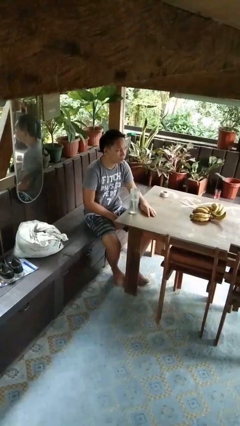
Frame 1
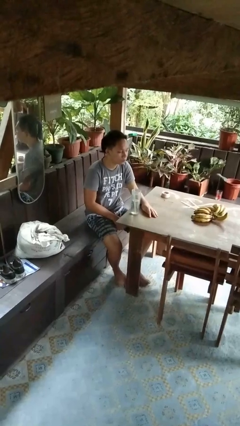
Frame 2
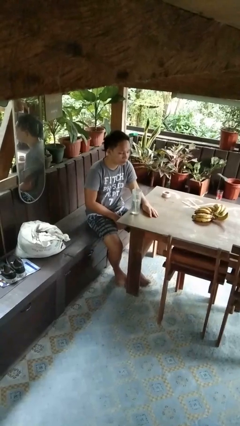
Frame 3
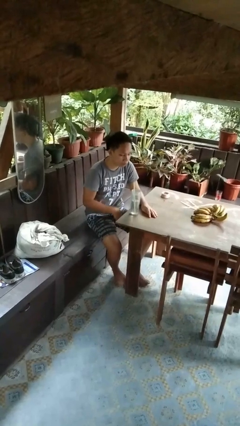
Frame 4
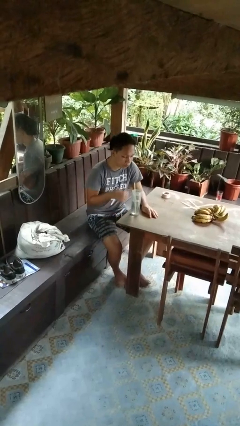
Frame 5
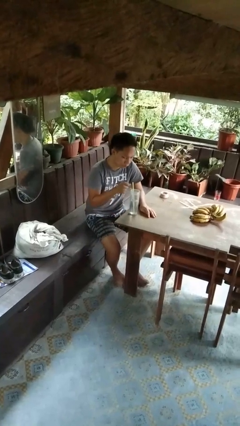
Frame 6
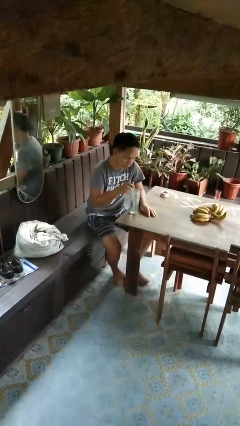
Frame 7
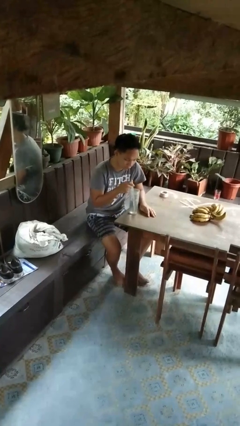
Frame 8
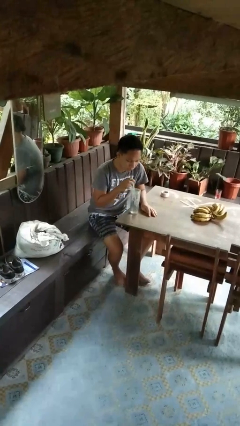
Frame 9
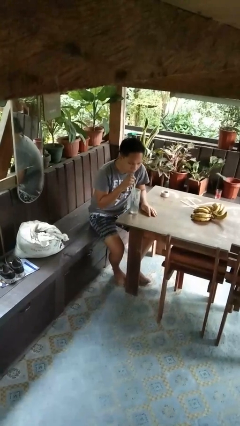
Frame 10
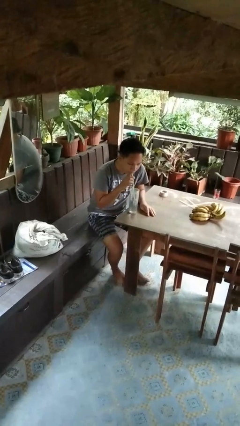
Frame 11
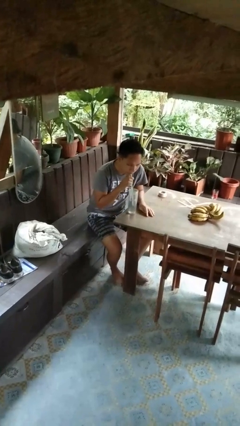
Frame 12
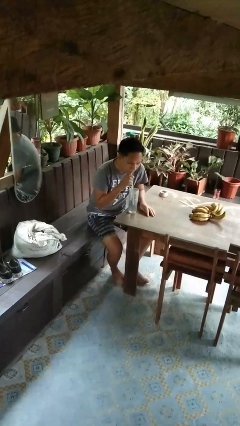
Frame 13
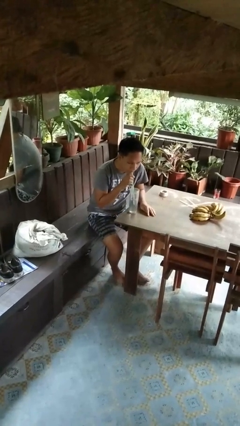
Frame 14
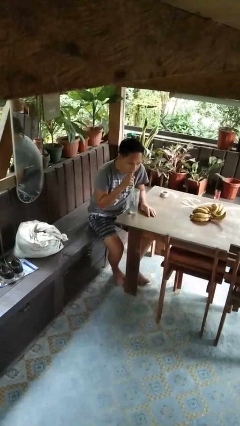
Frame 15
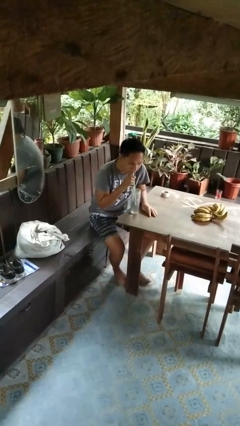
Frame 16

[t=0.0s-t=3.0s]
person drinks from straw

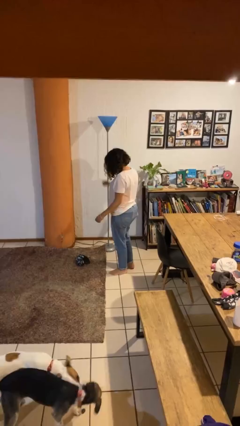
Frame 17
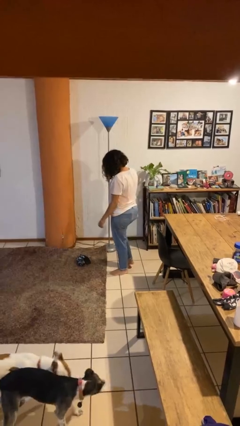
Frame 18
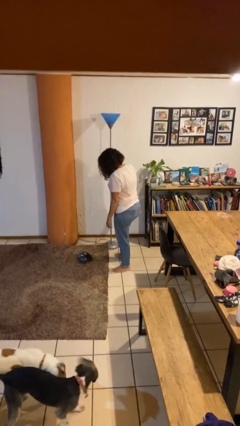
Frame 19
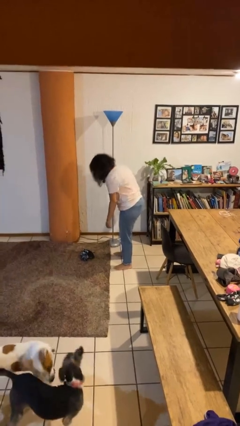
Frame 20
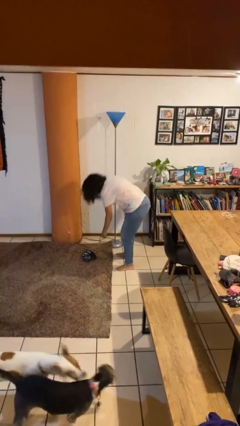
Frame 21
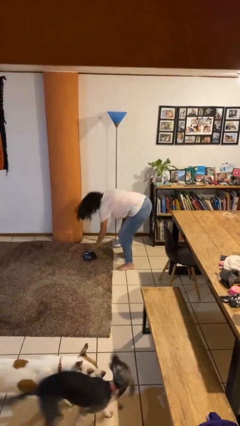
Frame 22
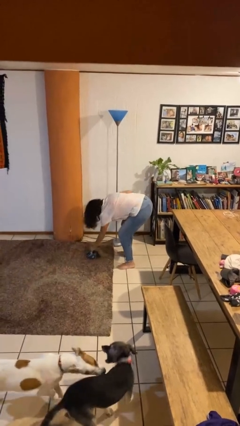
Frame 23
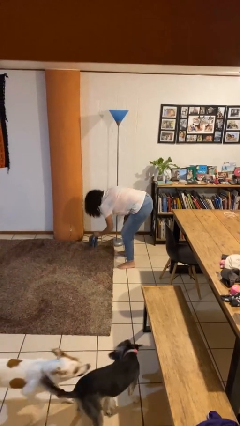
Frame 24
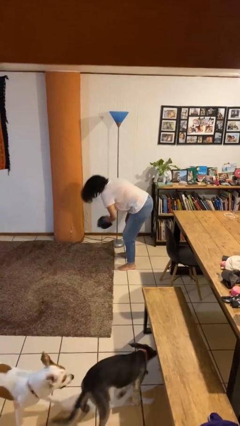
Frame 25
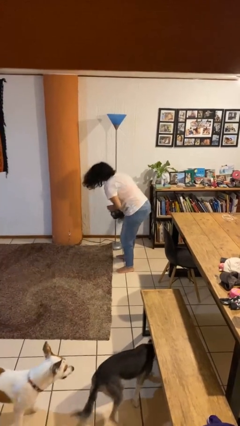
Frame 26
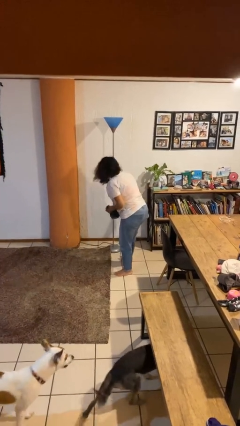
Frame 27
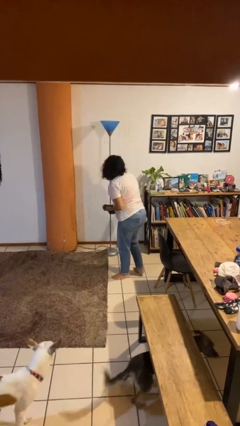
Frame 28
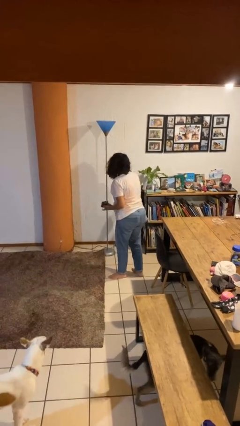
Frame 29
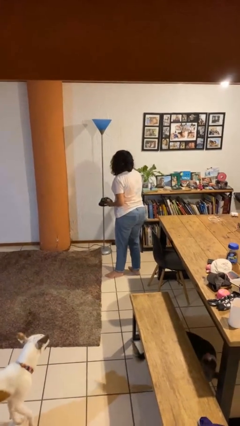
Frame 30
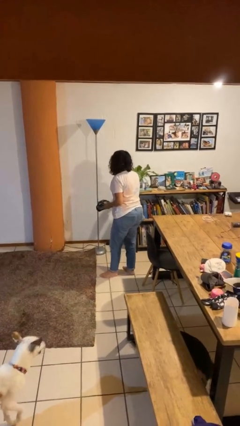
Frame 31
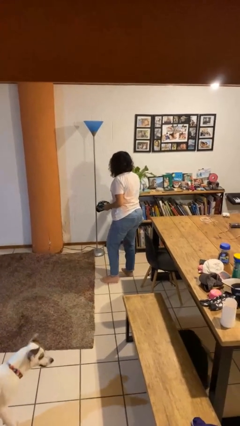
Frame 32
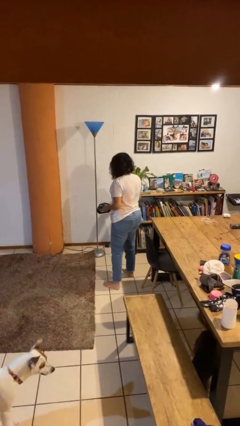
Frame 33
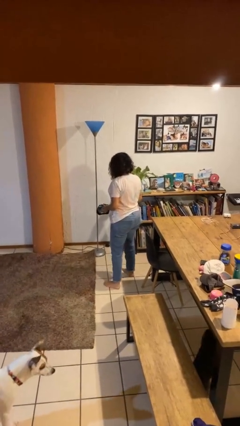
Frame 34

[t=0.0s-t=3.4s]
person picks up object from floor

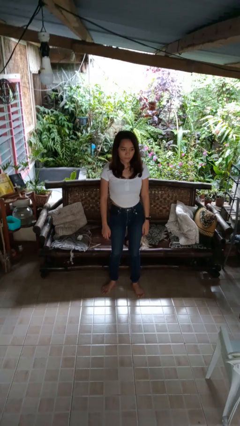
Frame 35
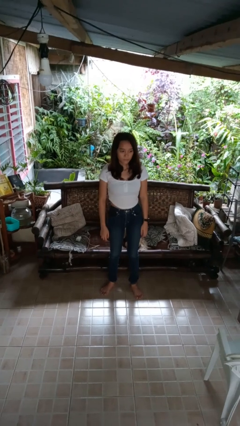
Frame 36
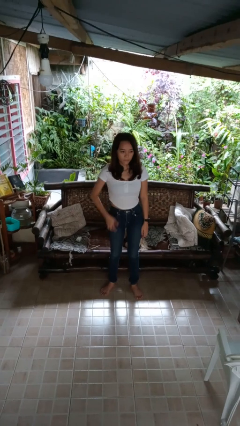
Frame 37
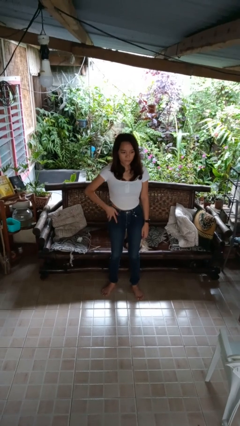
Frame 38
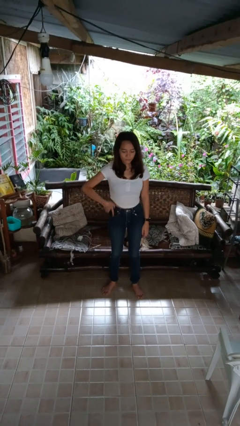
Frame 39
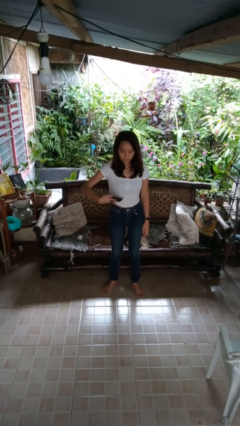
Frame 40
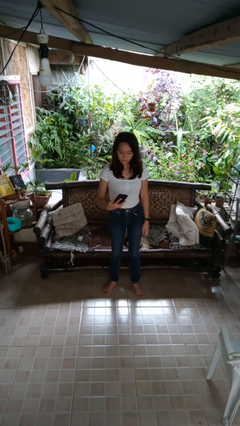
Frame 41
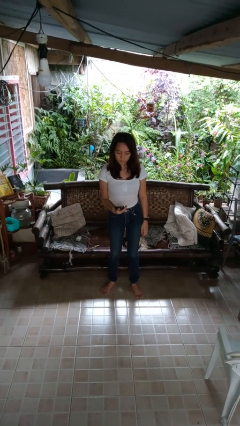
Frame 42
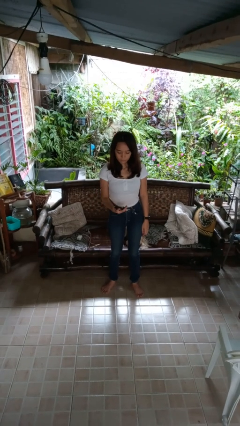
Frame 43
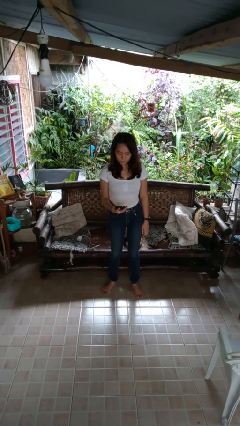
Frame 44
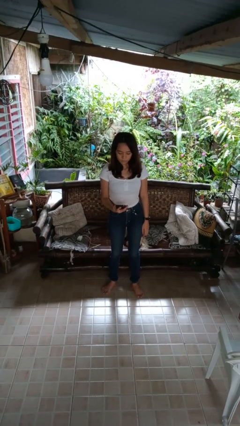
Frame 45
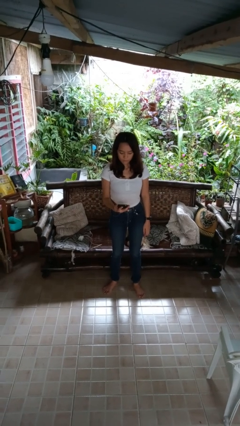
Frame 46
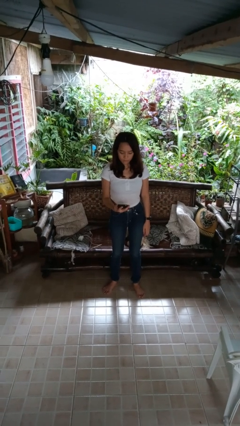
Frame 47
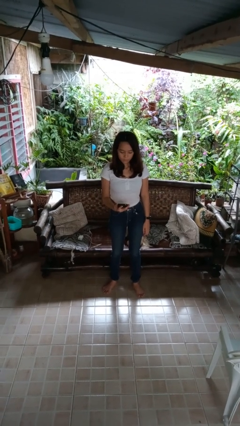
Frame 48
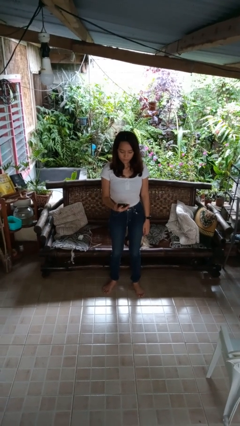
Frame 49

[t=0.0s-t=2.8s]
person takes phone from pocket

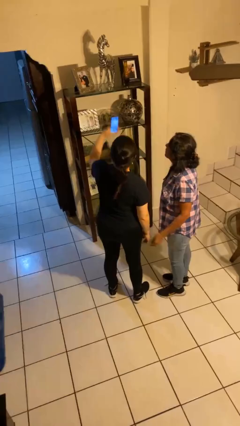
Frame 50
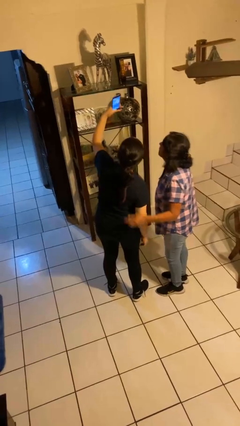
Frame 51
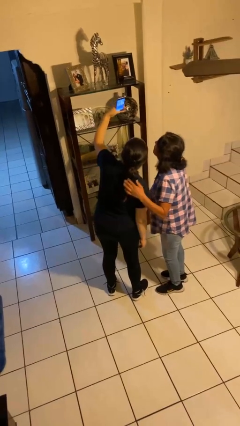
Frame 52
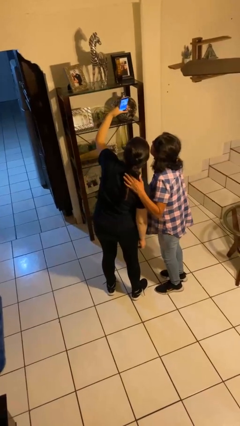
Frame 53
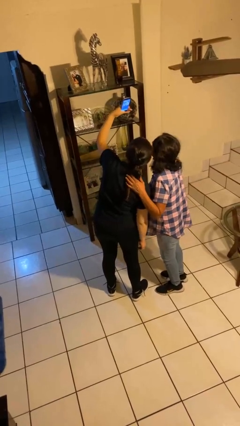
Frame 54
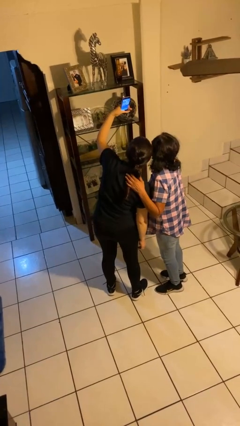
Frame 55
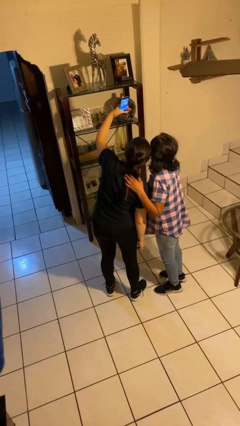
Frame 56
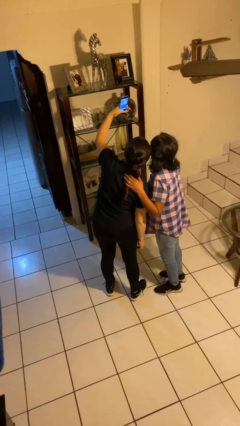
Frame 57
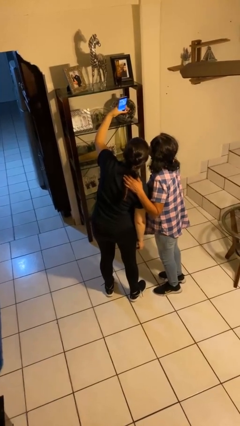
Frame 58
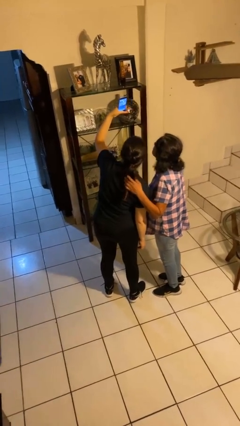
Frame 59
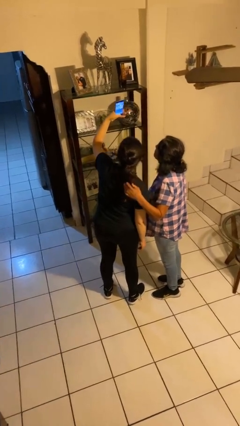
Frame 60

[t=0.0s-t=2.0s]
person takes selfie with person

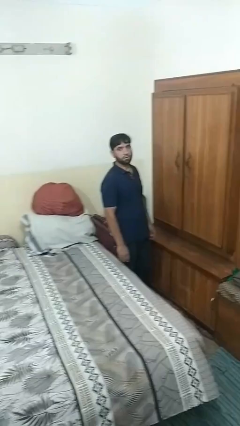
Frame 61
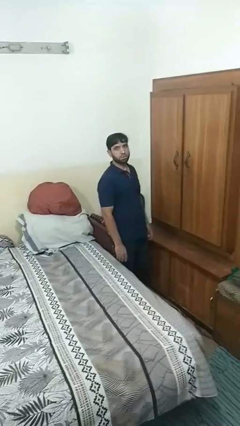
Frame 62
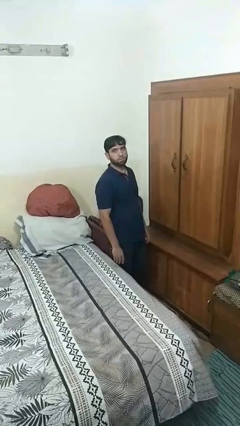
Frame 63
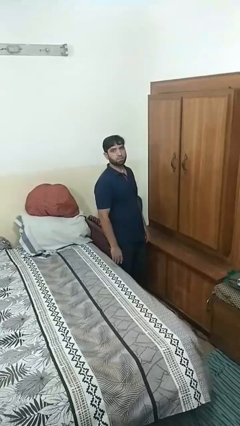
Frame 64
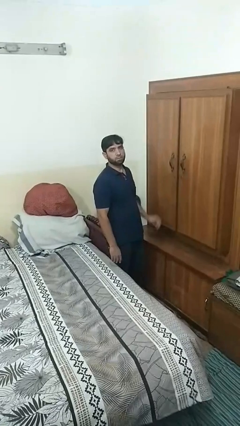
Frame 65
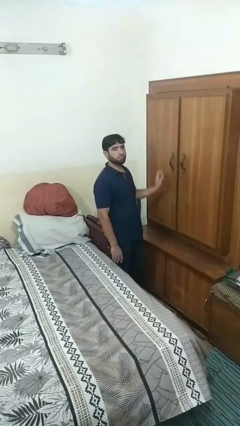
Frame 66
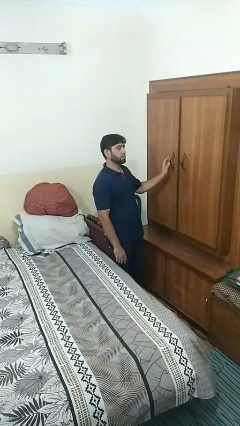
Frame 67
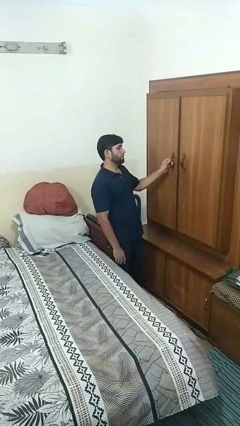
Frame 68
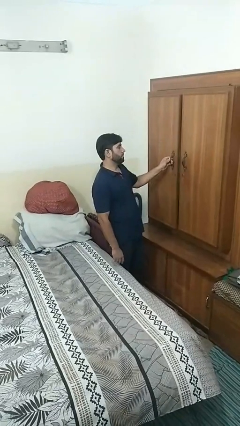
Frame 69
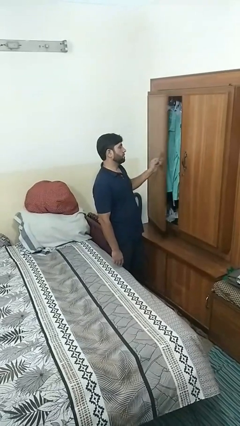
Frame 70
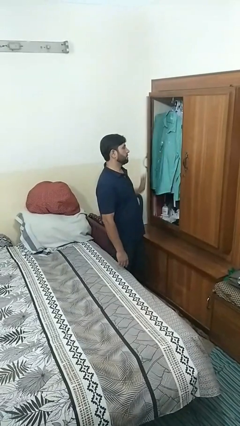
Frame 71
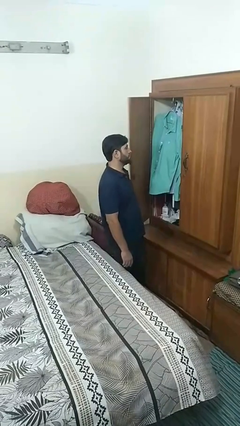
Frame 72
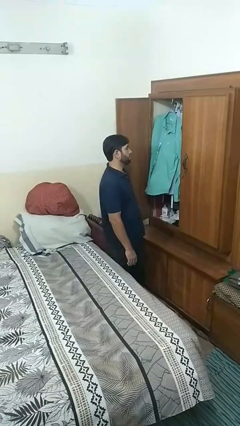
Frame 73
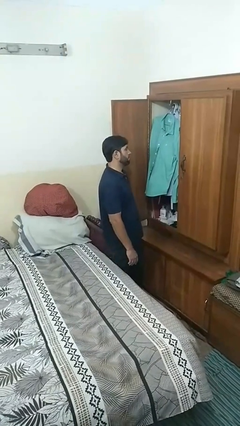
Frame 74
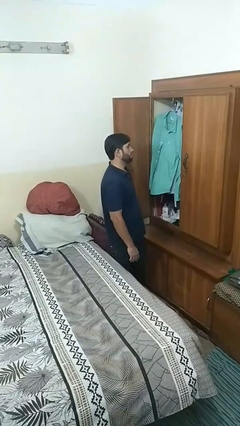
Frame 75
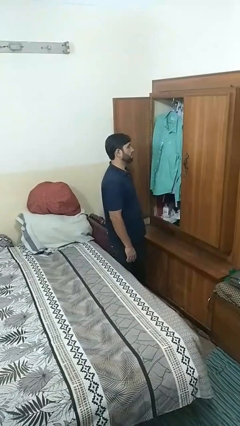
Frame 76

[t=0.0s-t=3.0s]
person opens closet door

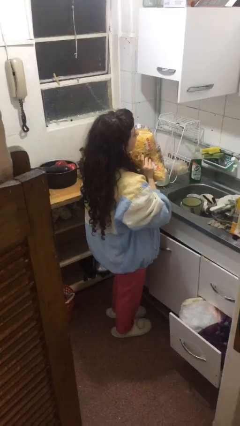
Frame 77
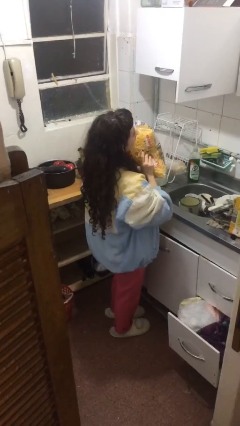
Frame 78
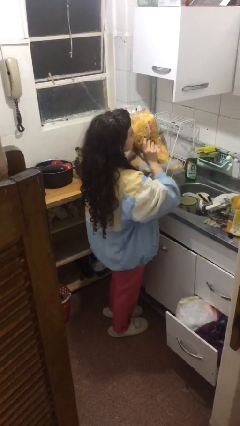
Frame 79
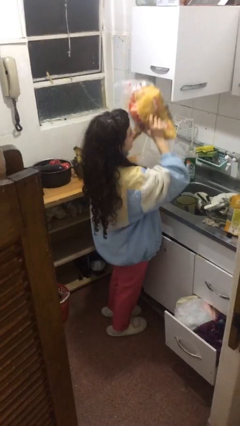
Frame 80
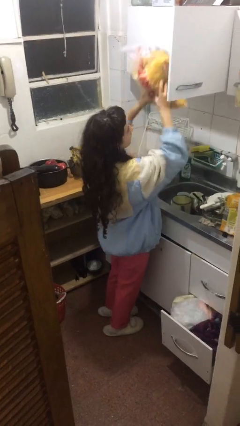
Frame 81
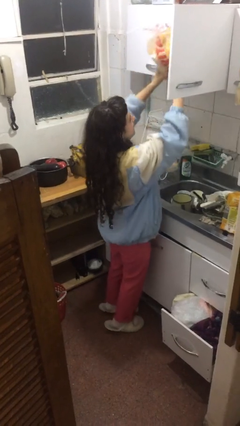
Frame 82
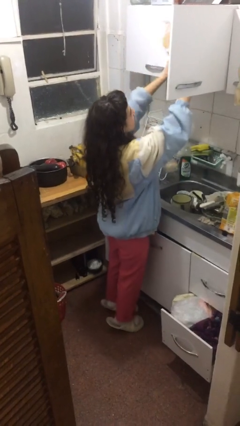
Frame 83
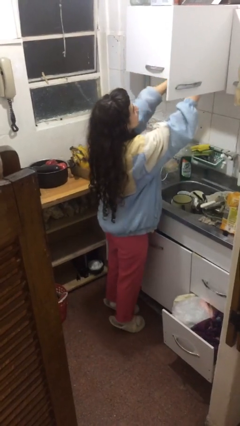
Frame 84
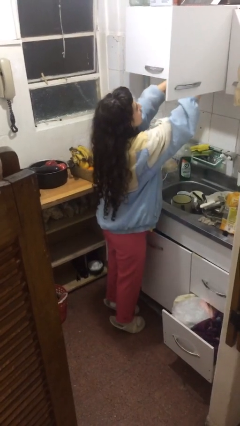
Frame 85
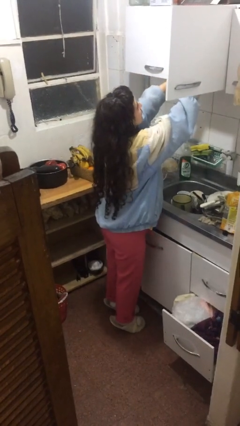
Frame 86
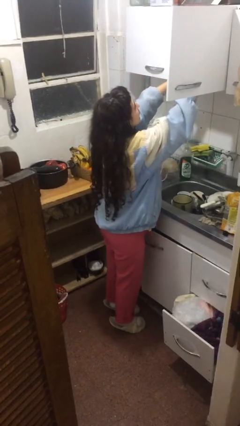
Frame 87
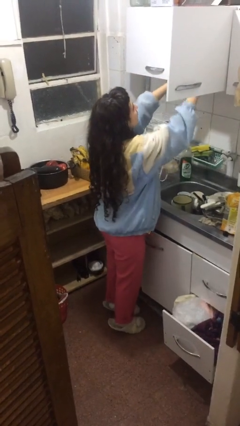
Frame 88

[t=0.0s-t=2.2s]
person puts down object into cabinet

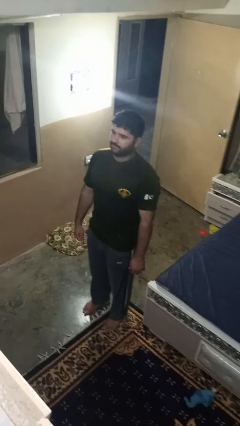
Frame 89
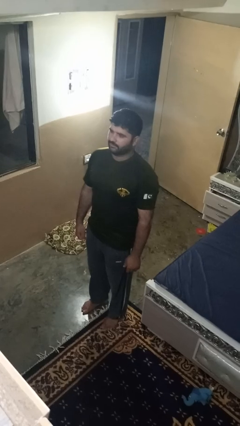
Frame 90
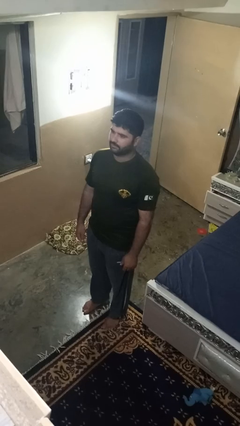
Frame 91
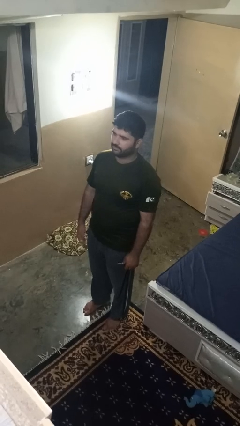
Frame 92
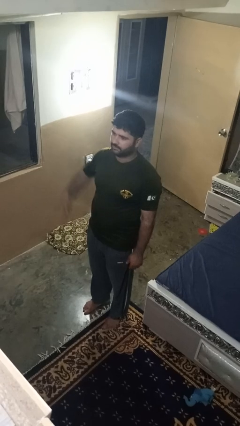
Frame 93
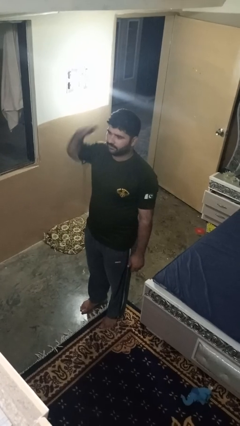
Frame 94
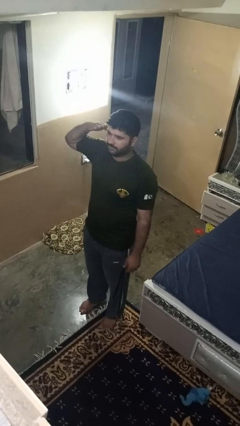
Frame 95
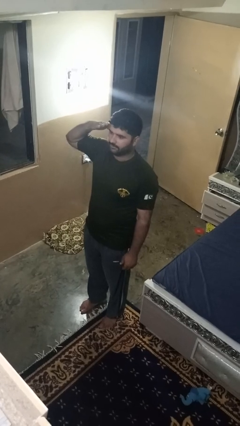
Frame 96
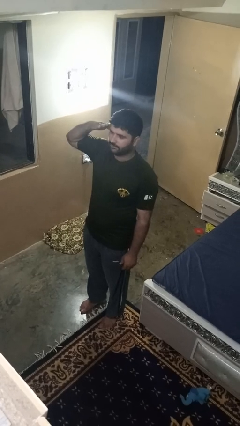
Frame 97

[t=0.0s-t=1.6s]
person salutes
